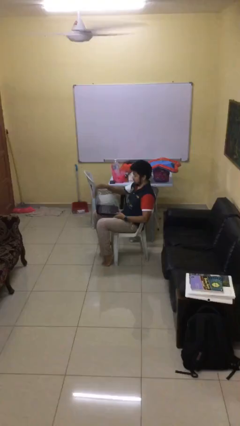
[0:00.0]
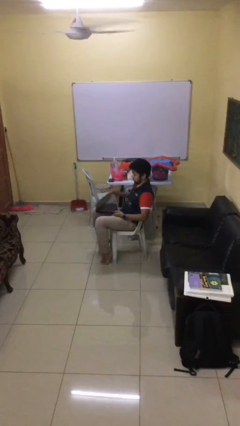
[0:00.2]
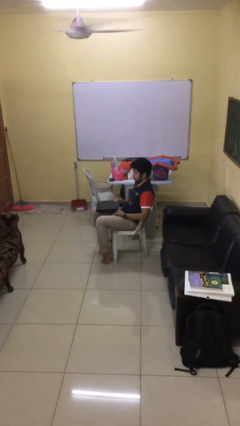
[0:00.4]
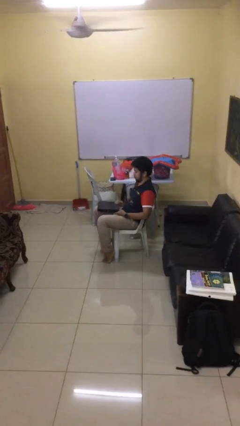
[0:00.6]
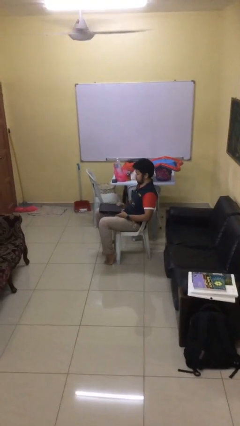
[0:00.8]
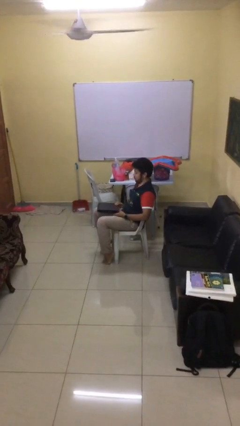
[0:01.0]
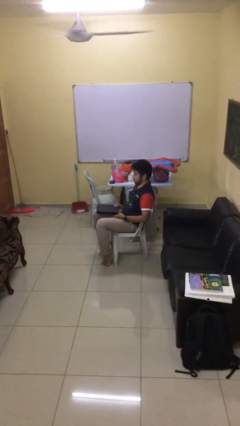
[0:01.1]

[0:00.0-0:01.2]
person closes laptop

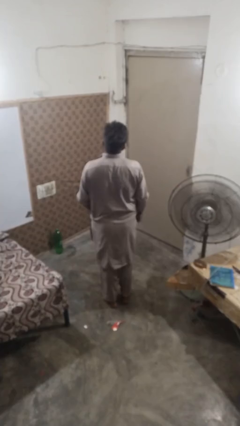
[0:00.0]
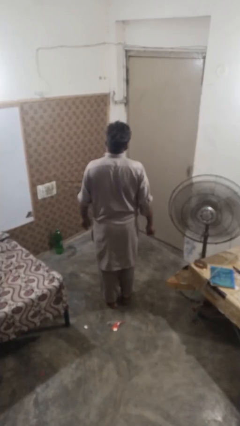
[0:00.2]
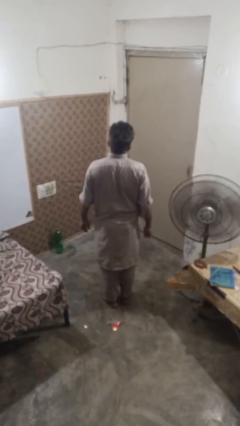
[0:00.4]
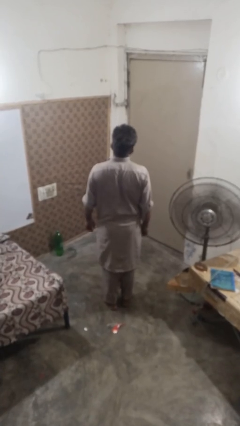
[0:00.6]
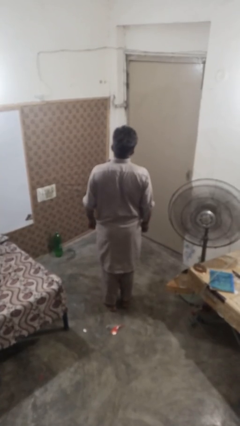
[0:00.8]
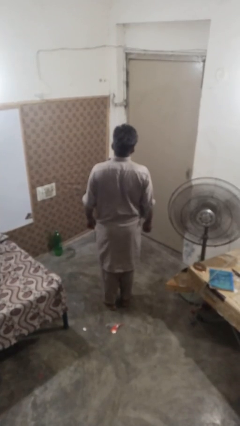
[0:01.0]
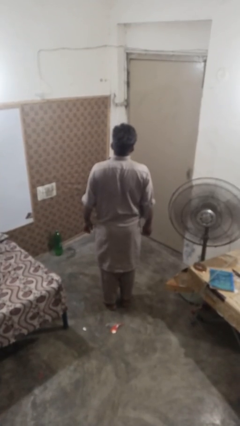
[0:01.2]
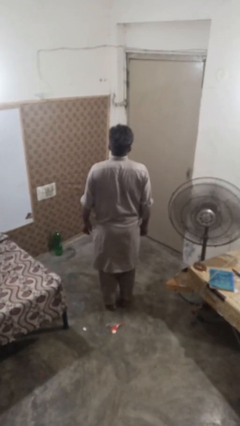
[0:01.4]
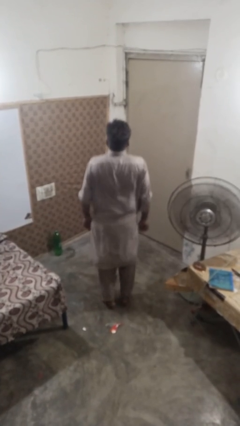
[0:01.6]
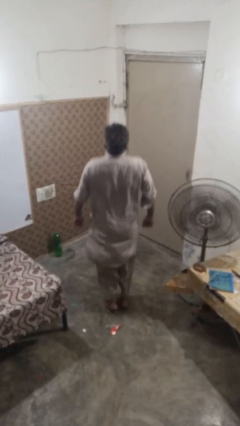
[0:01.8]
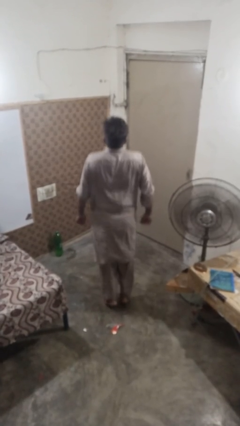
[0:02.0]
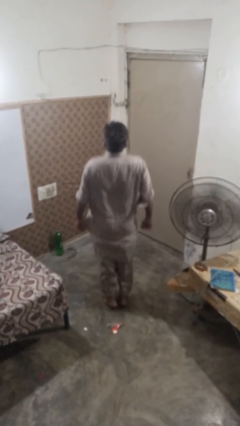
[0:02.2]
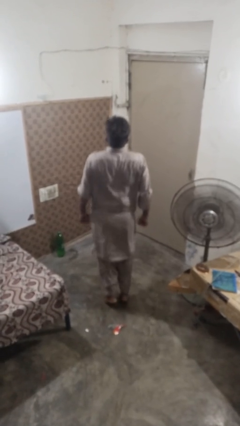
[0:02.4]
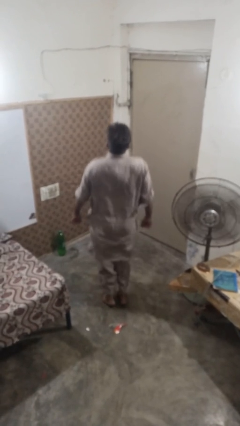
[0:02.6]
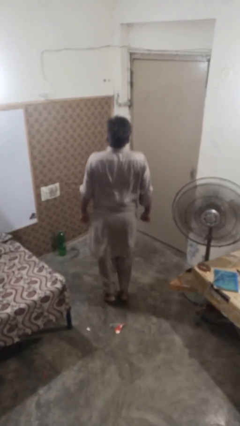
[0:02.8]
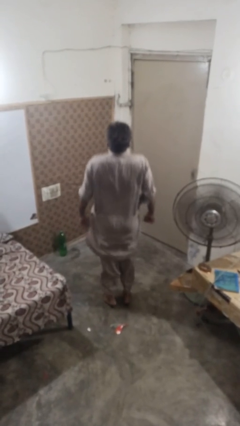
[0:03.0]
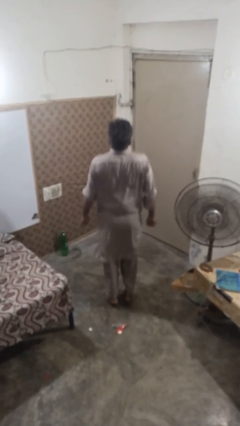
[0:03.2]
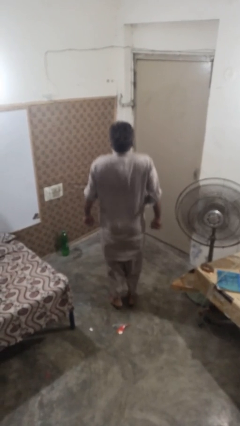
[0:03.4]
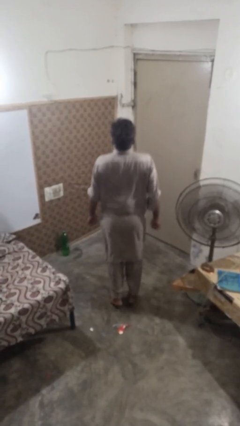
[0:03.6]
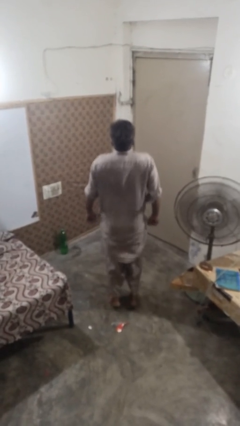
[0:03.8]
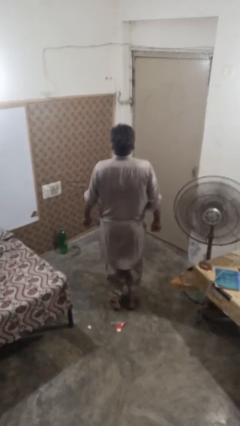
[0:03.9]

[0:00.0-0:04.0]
person jumps

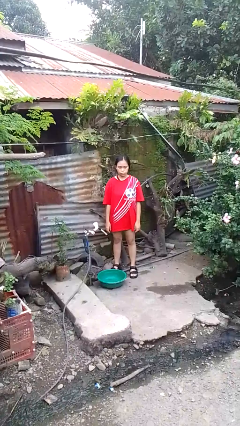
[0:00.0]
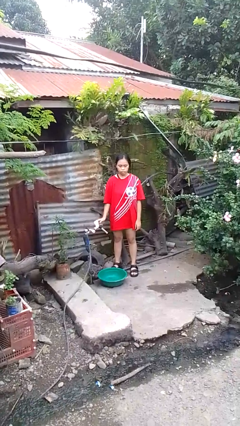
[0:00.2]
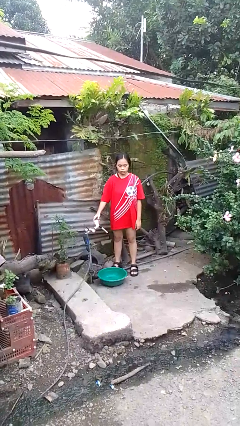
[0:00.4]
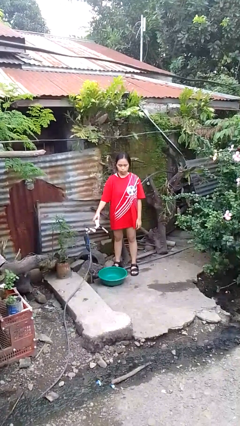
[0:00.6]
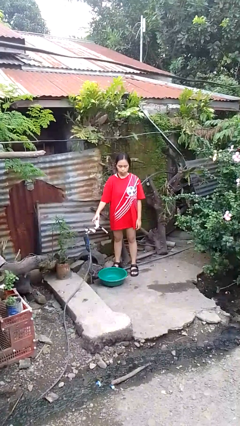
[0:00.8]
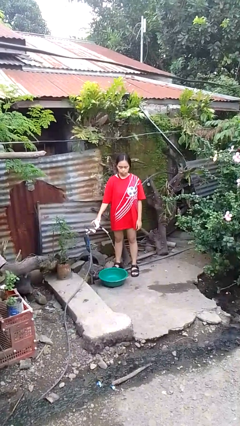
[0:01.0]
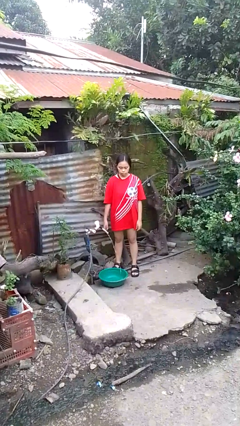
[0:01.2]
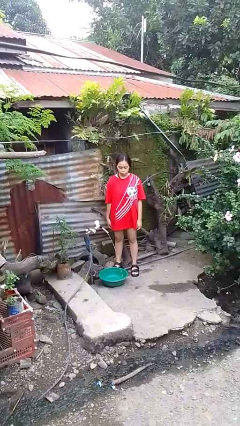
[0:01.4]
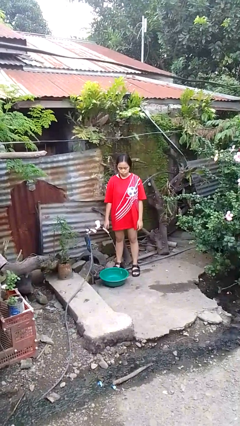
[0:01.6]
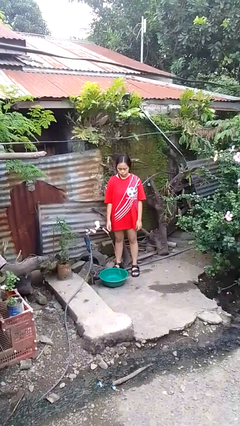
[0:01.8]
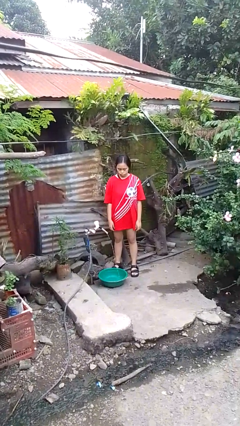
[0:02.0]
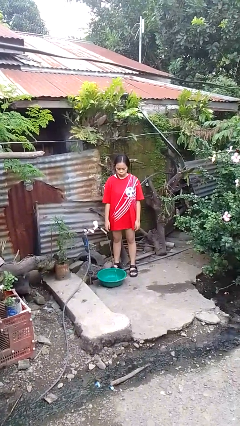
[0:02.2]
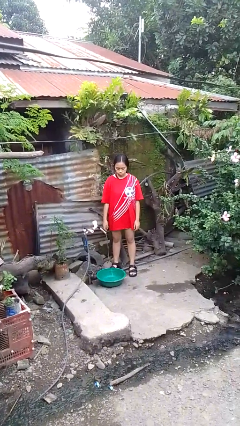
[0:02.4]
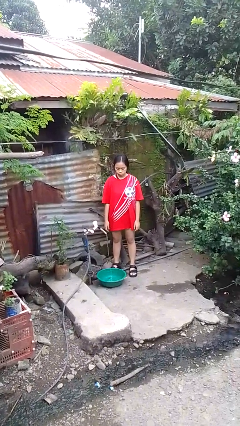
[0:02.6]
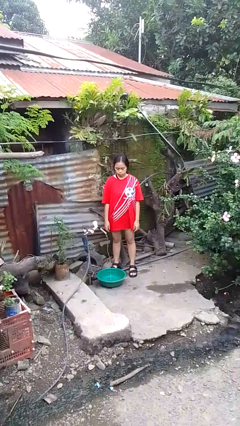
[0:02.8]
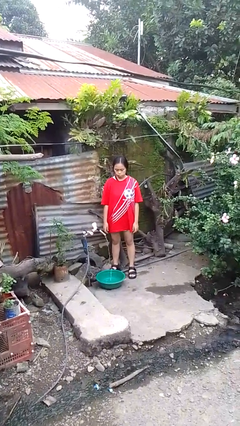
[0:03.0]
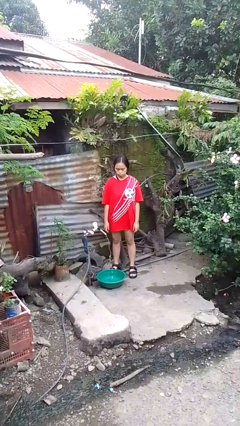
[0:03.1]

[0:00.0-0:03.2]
person turns on faucet

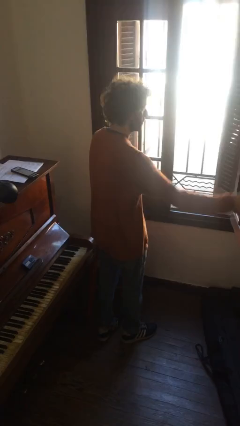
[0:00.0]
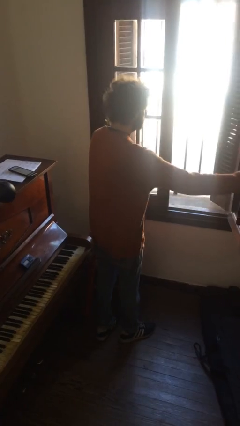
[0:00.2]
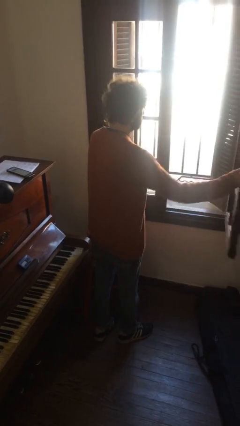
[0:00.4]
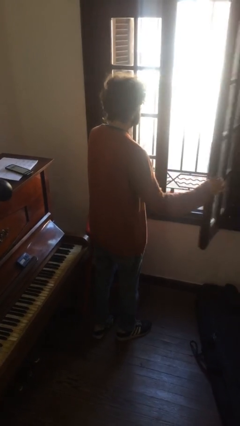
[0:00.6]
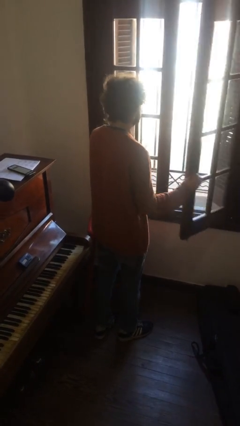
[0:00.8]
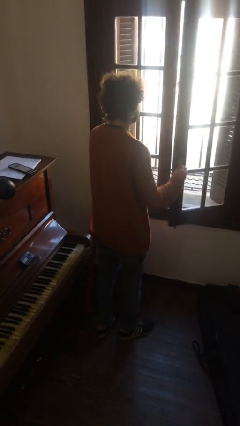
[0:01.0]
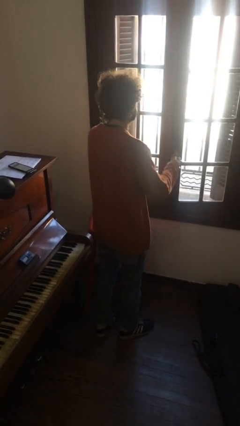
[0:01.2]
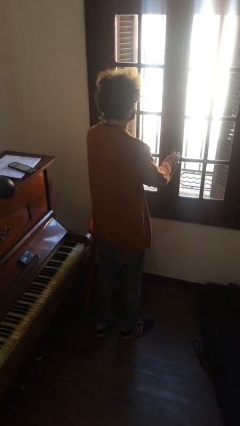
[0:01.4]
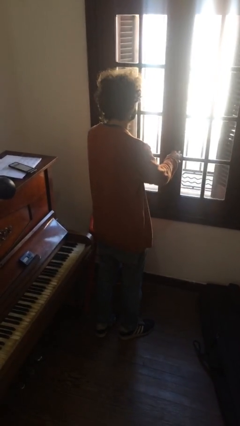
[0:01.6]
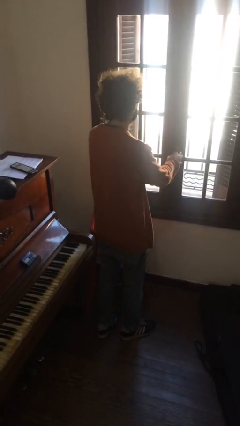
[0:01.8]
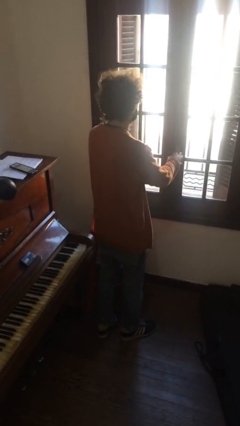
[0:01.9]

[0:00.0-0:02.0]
person closes home window

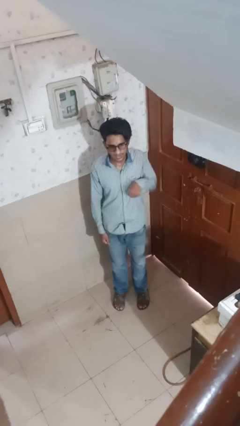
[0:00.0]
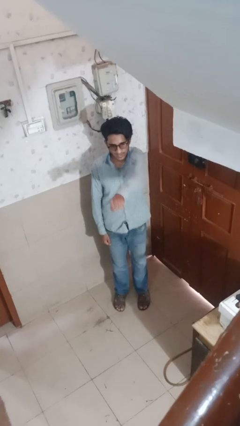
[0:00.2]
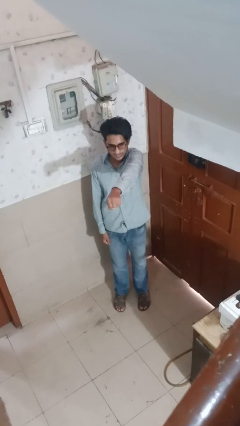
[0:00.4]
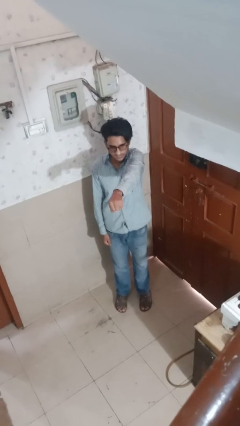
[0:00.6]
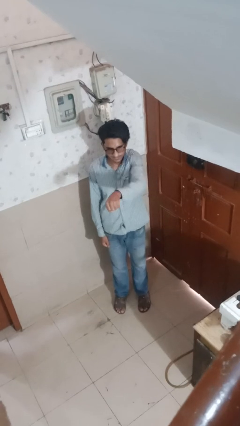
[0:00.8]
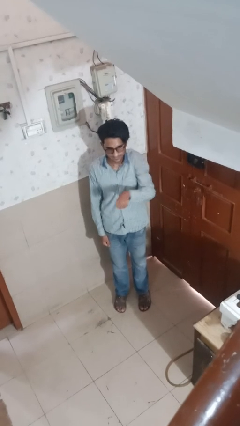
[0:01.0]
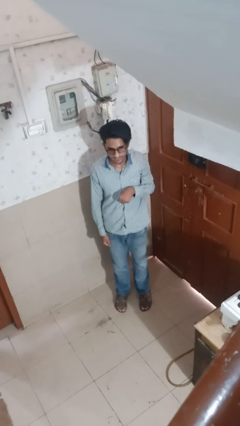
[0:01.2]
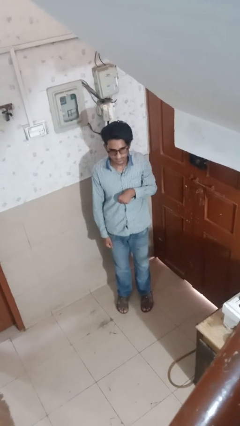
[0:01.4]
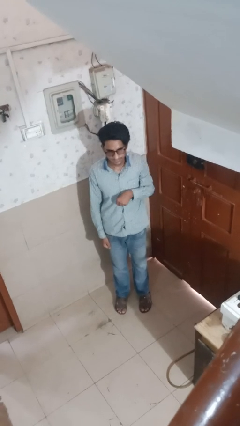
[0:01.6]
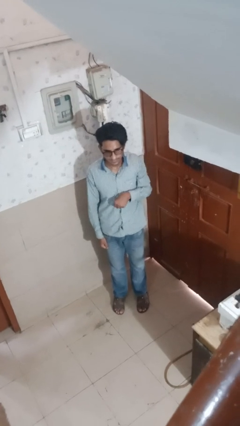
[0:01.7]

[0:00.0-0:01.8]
person punches

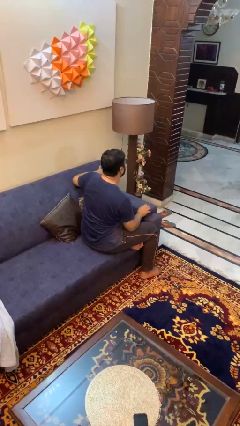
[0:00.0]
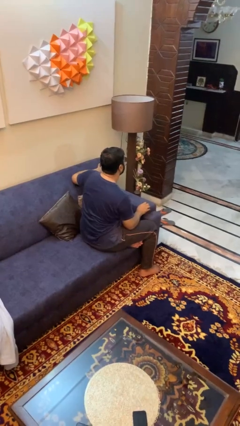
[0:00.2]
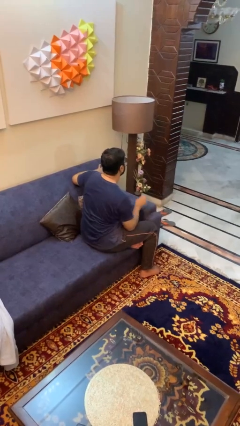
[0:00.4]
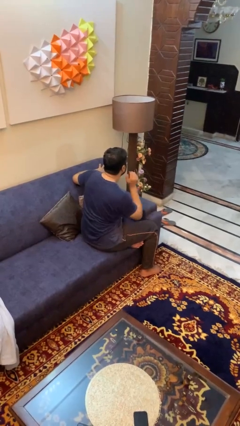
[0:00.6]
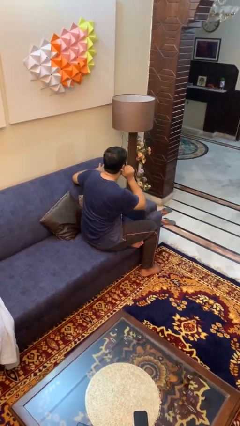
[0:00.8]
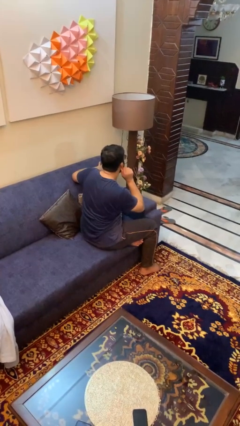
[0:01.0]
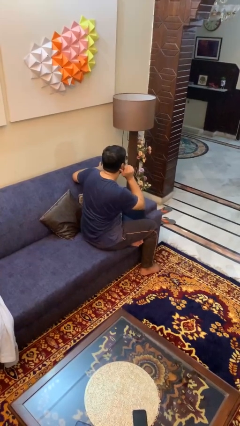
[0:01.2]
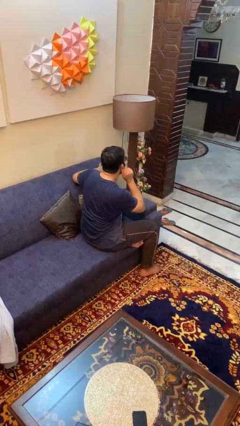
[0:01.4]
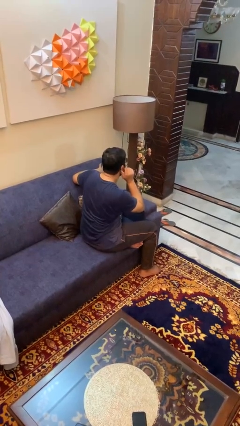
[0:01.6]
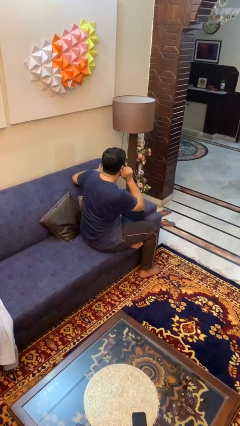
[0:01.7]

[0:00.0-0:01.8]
person touches earlobe

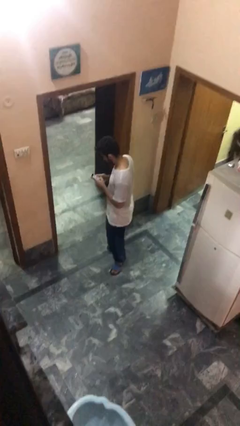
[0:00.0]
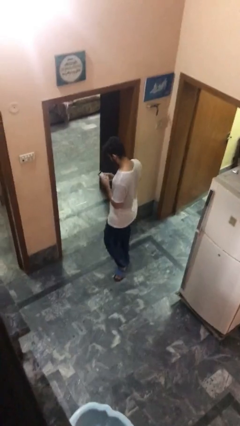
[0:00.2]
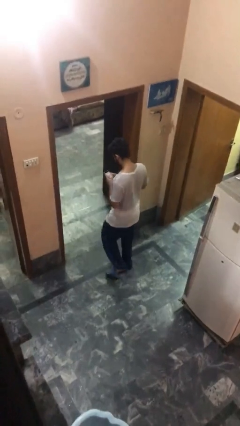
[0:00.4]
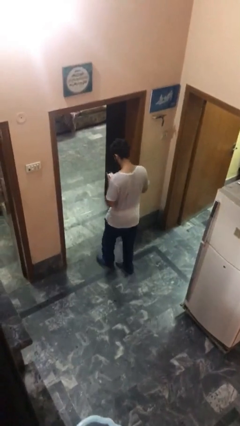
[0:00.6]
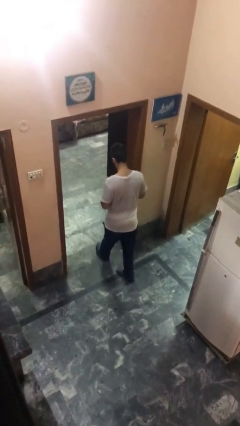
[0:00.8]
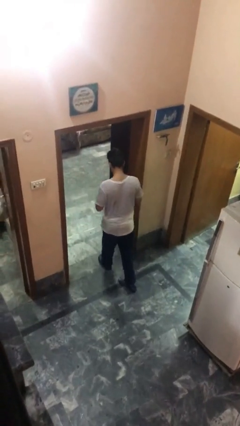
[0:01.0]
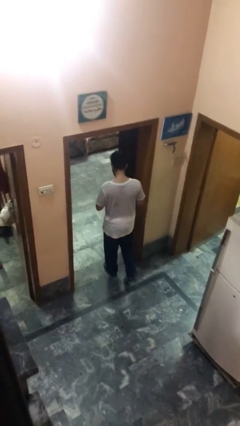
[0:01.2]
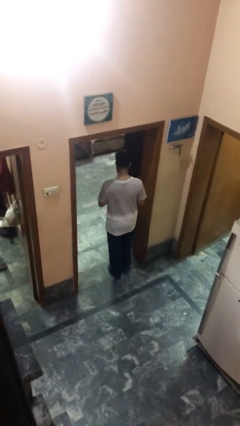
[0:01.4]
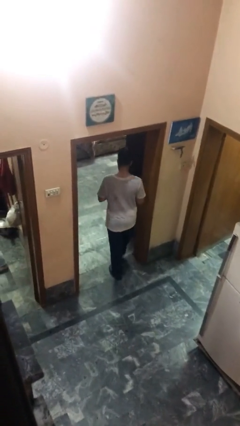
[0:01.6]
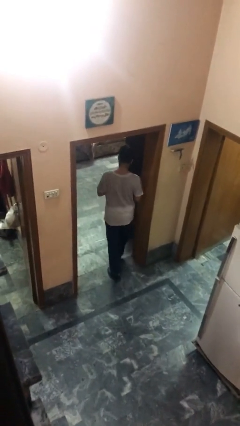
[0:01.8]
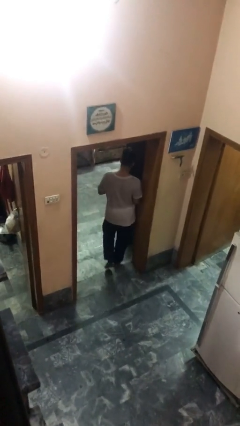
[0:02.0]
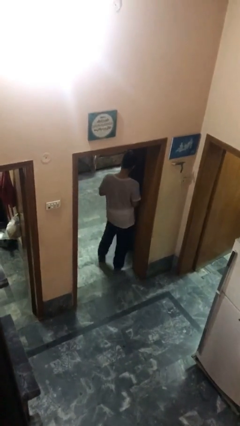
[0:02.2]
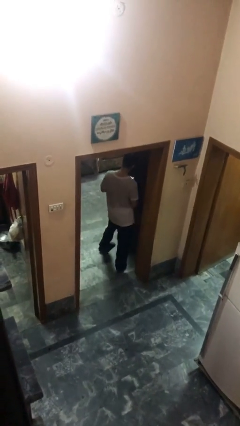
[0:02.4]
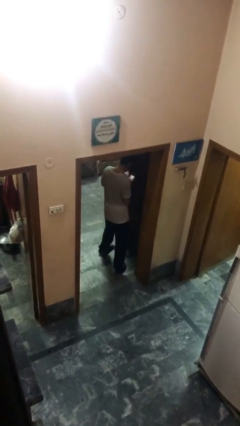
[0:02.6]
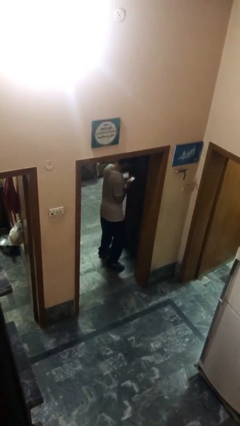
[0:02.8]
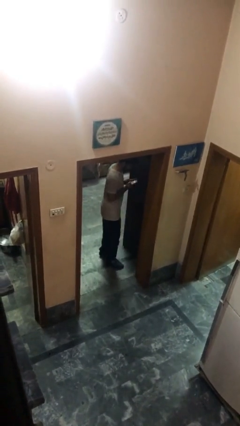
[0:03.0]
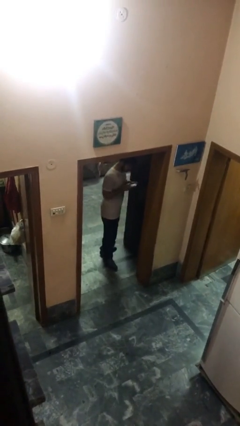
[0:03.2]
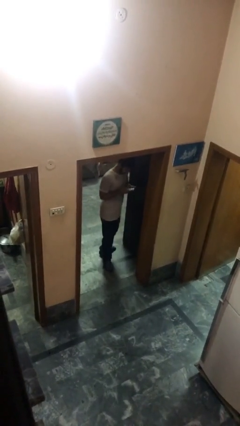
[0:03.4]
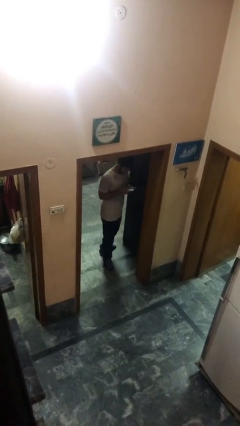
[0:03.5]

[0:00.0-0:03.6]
person exits scene through structure
